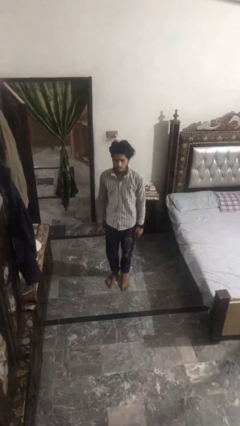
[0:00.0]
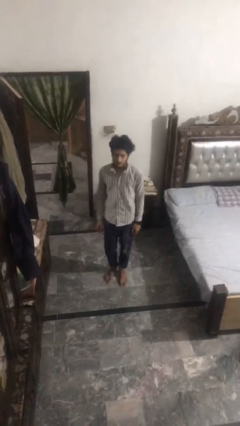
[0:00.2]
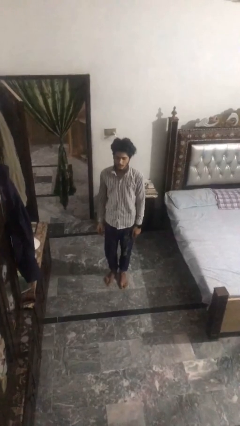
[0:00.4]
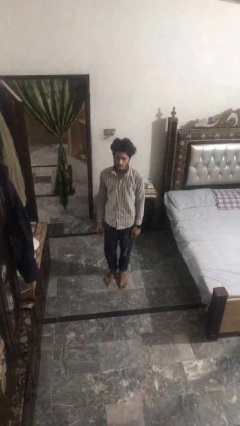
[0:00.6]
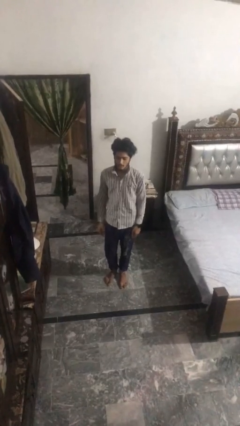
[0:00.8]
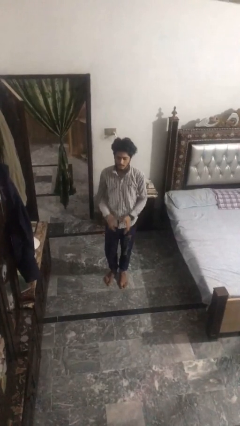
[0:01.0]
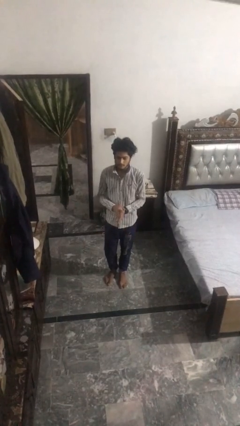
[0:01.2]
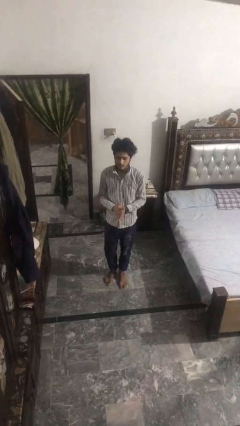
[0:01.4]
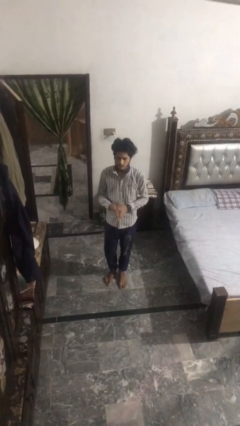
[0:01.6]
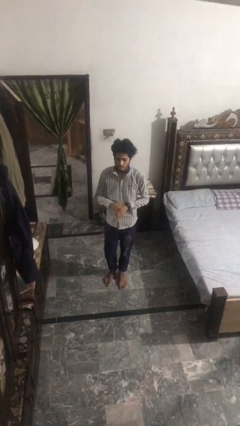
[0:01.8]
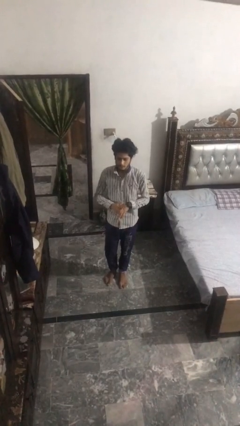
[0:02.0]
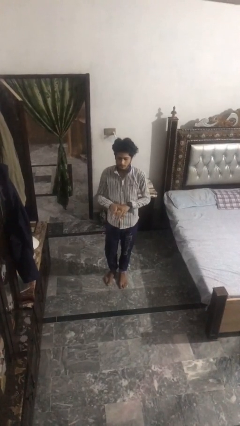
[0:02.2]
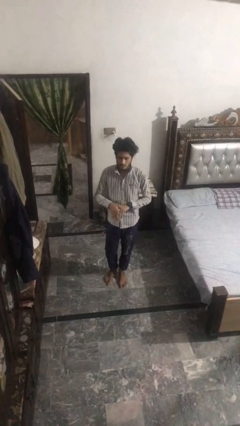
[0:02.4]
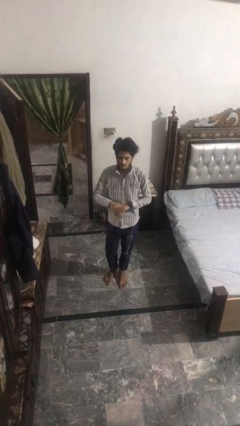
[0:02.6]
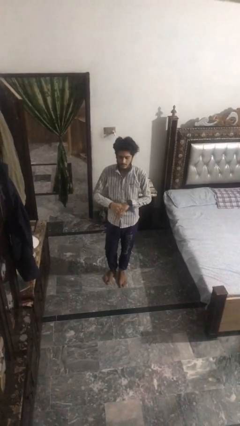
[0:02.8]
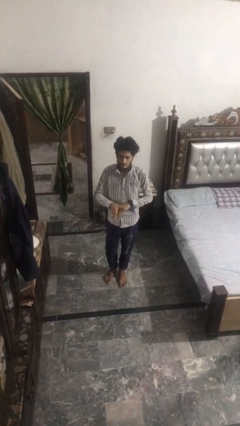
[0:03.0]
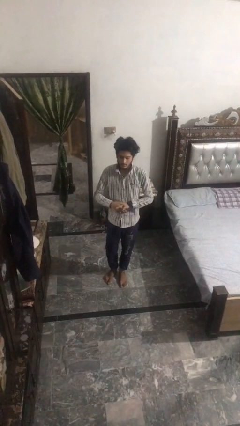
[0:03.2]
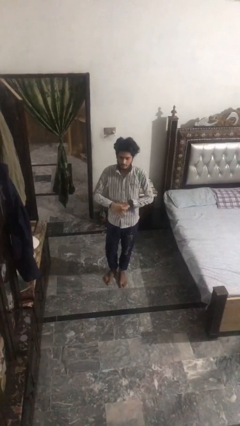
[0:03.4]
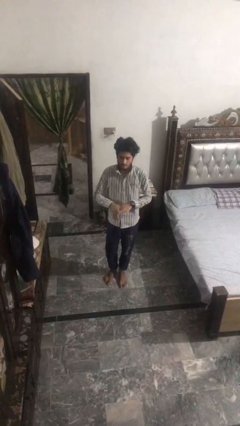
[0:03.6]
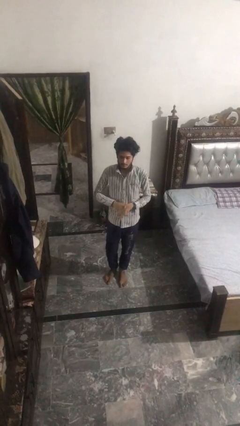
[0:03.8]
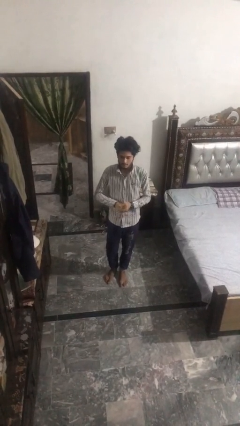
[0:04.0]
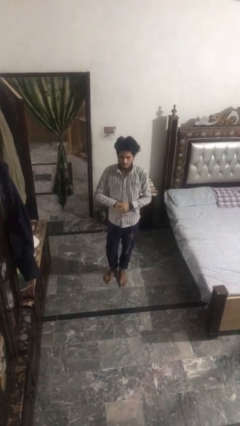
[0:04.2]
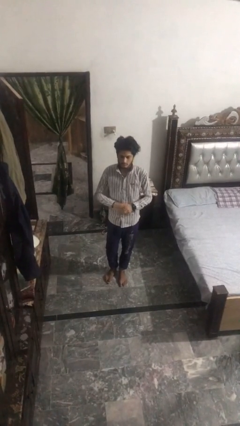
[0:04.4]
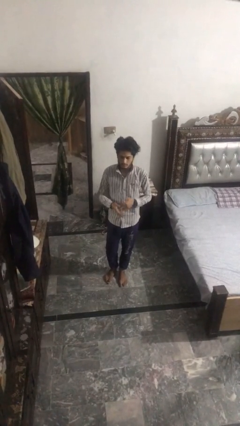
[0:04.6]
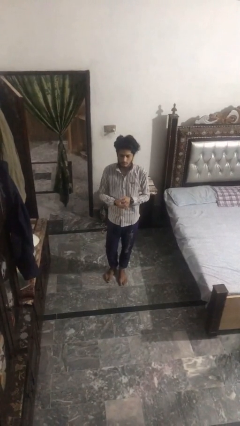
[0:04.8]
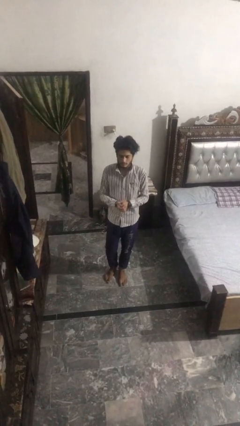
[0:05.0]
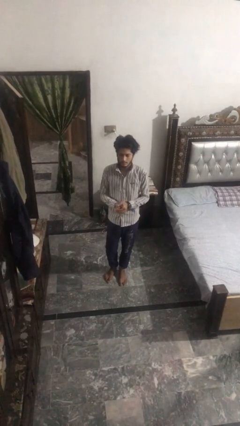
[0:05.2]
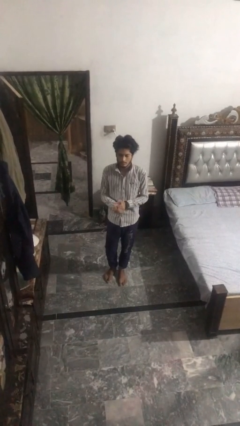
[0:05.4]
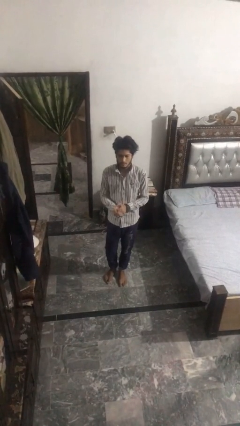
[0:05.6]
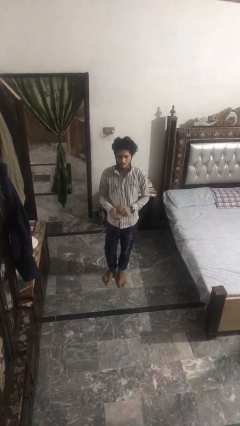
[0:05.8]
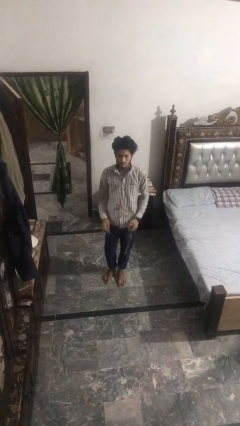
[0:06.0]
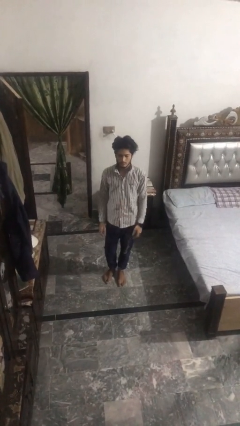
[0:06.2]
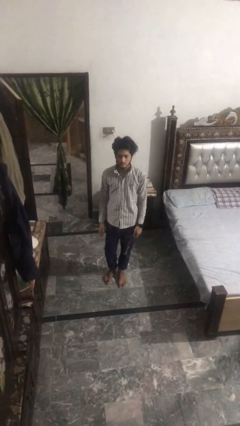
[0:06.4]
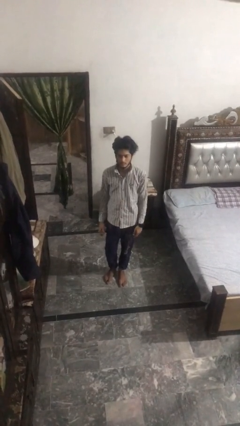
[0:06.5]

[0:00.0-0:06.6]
person cracks knuckles

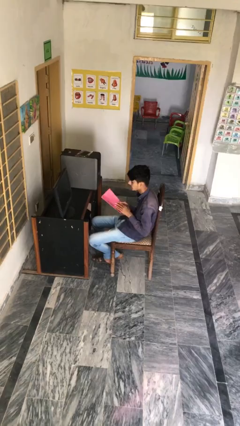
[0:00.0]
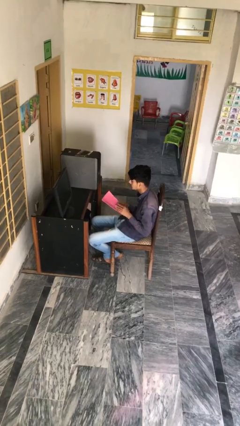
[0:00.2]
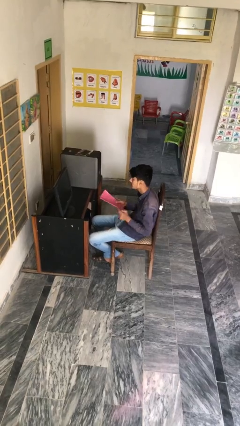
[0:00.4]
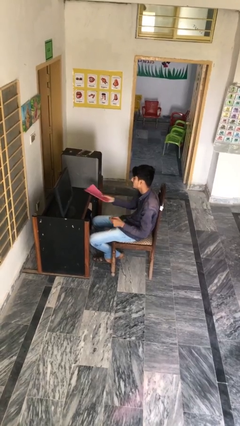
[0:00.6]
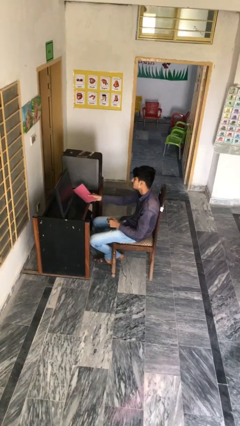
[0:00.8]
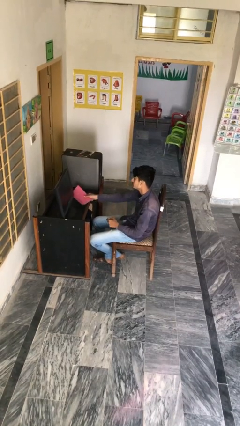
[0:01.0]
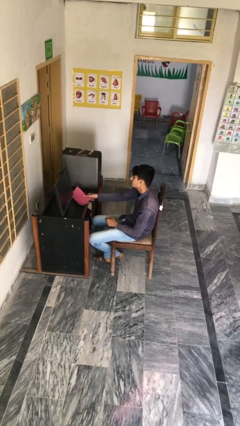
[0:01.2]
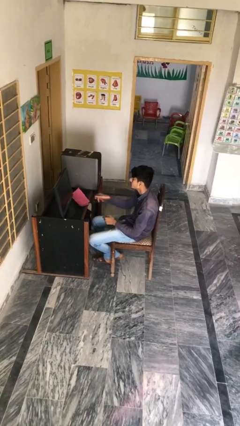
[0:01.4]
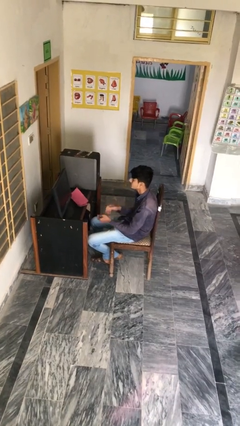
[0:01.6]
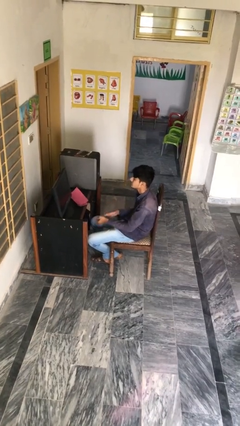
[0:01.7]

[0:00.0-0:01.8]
person puts down object on table

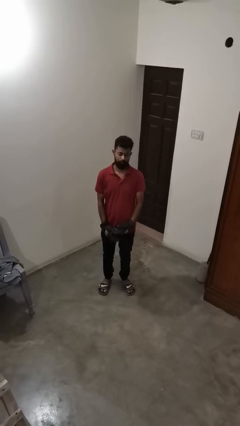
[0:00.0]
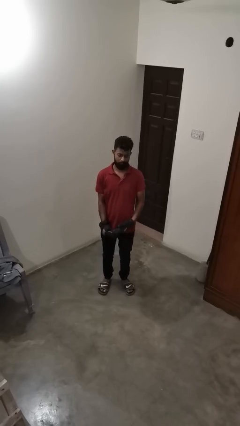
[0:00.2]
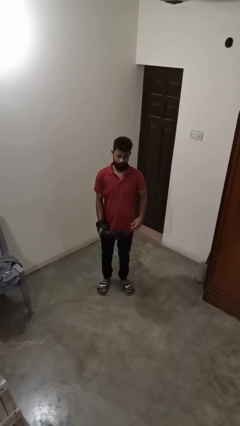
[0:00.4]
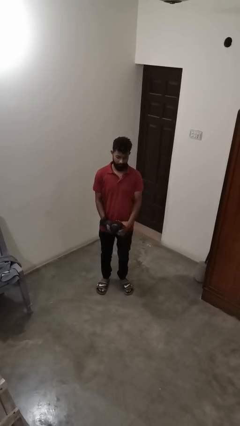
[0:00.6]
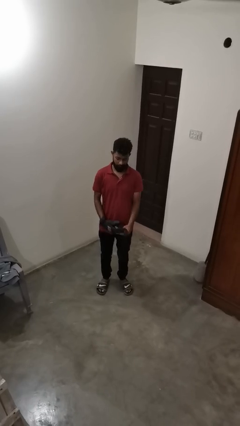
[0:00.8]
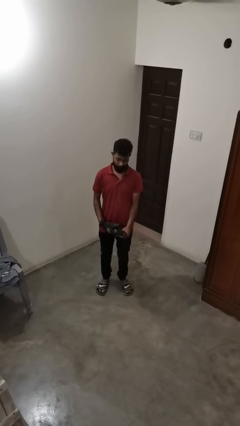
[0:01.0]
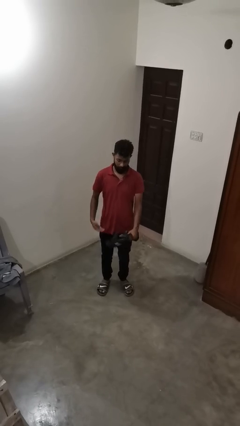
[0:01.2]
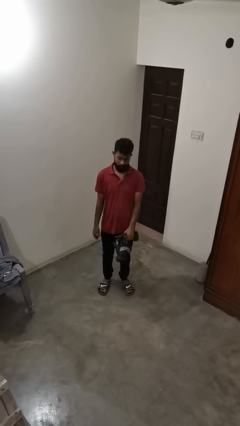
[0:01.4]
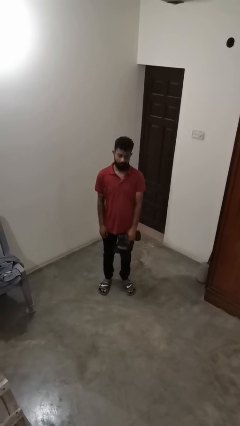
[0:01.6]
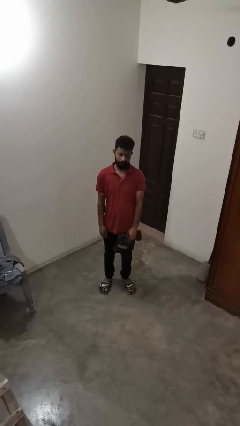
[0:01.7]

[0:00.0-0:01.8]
person takes off gloves

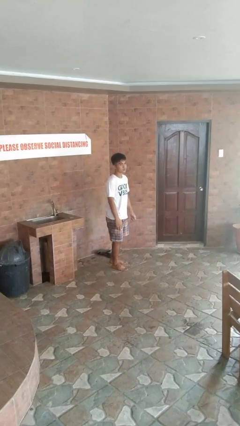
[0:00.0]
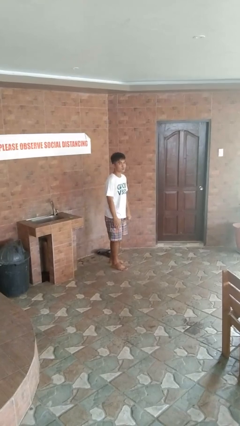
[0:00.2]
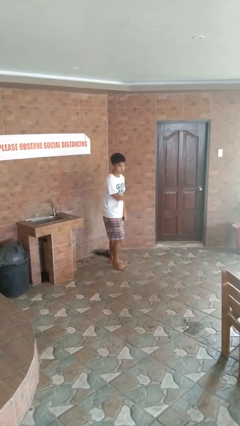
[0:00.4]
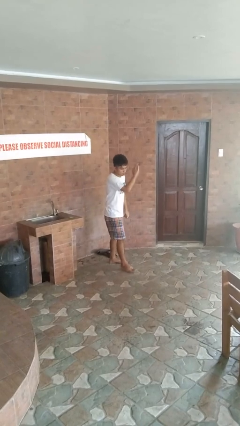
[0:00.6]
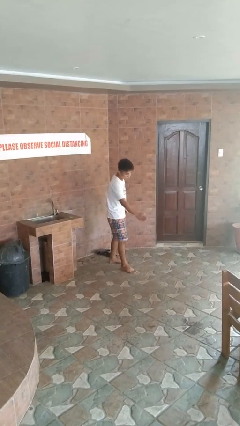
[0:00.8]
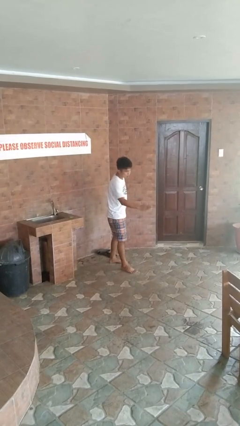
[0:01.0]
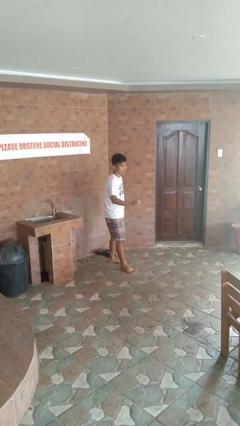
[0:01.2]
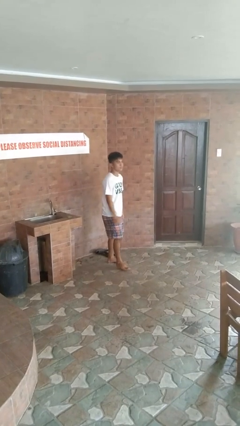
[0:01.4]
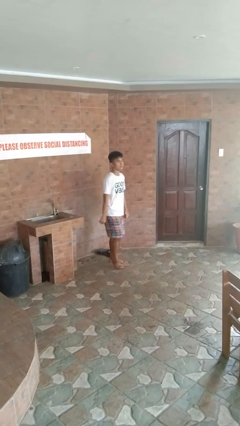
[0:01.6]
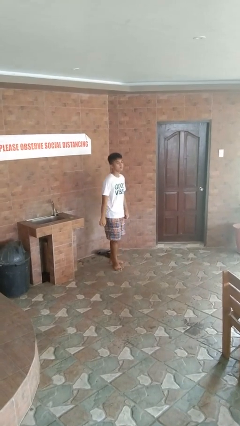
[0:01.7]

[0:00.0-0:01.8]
person karate chop

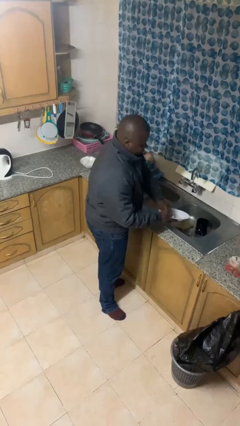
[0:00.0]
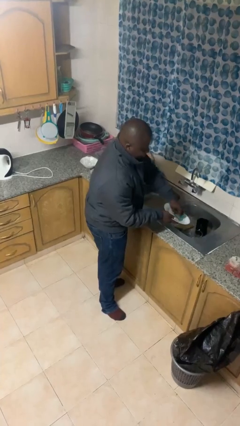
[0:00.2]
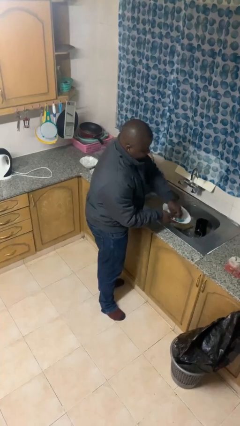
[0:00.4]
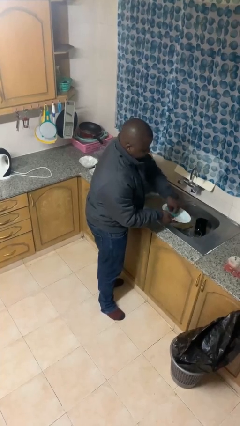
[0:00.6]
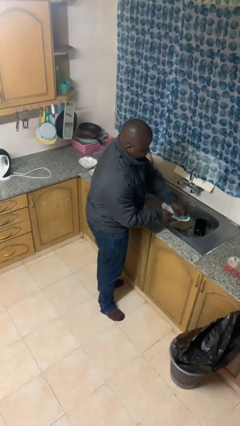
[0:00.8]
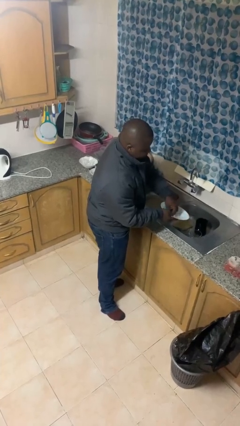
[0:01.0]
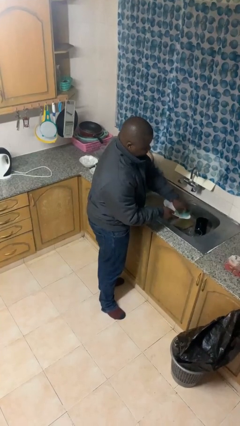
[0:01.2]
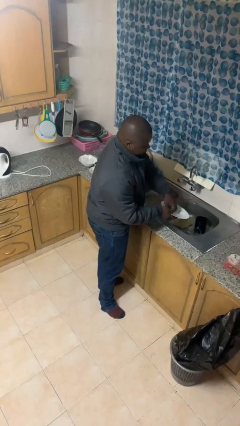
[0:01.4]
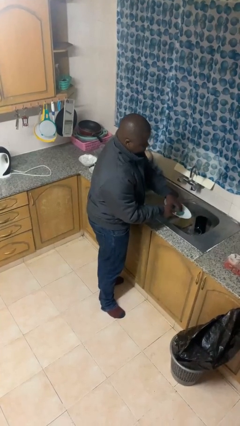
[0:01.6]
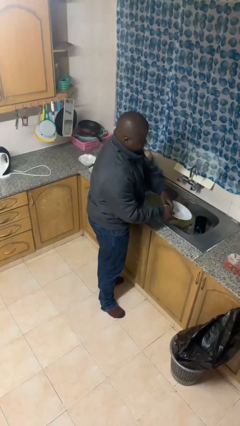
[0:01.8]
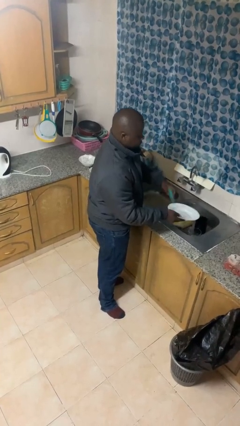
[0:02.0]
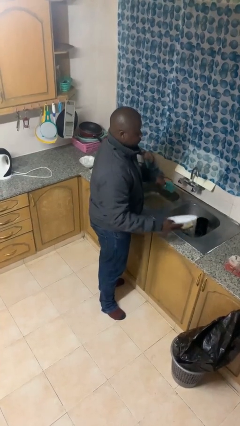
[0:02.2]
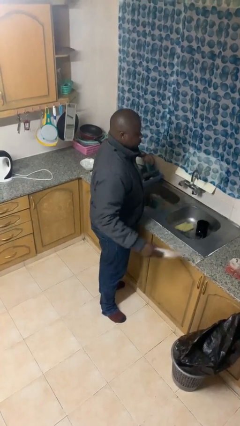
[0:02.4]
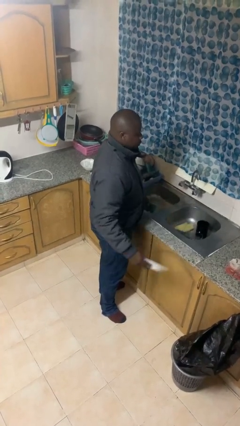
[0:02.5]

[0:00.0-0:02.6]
person washes dish

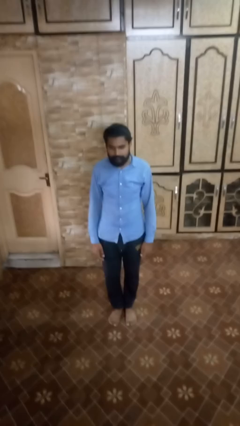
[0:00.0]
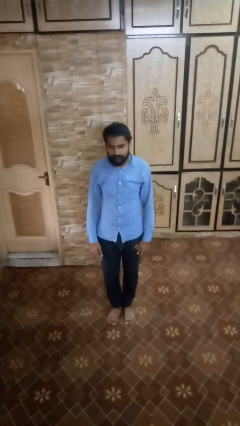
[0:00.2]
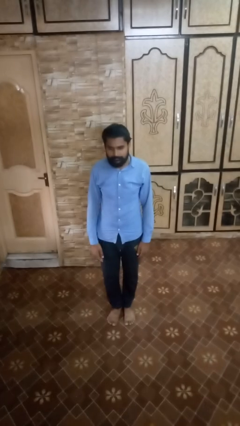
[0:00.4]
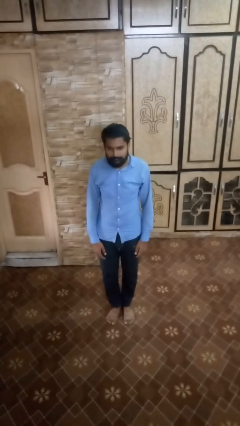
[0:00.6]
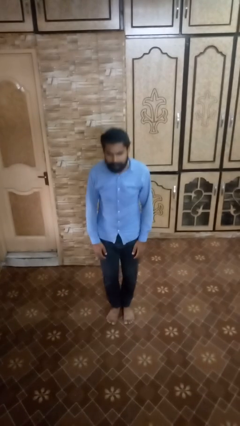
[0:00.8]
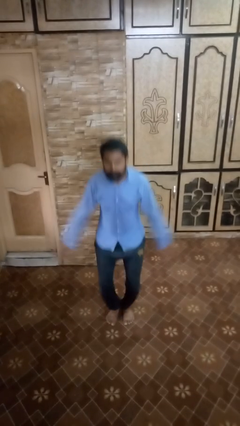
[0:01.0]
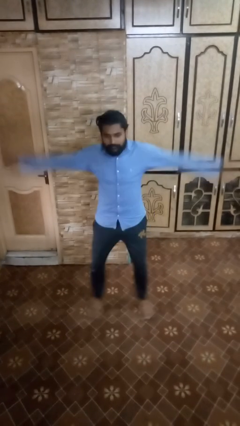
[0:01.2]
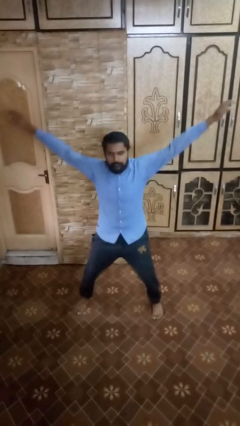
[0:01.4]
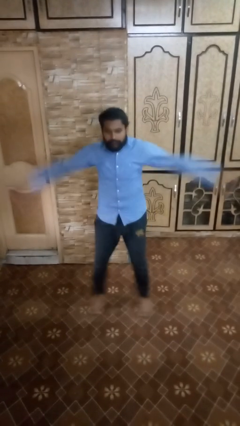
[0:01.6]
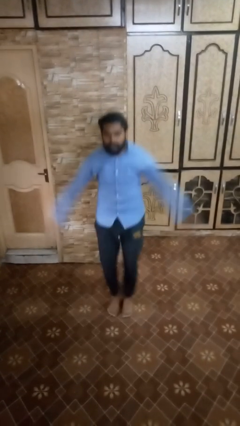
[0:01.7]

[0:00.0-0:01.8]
person exercises with jumping jacks

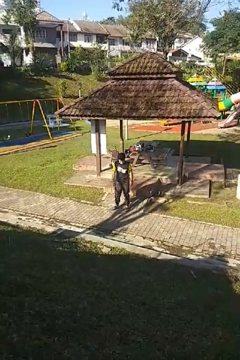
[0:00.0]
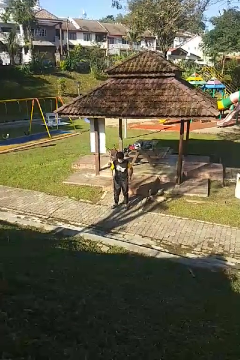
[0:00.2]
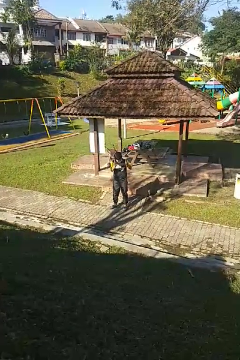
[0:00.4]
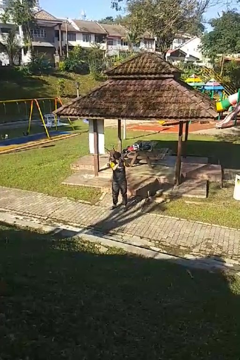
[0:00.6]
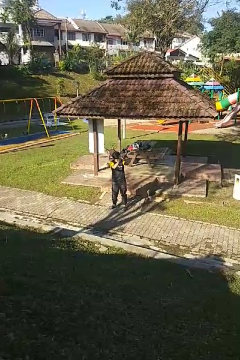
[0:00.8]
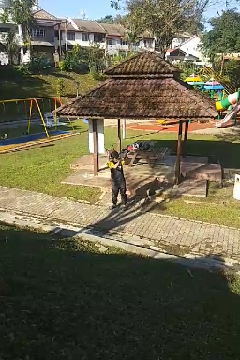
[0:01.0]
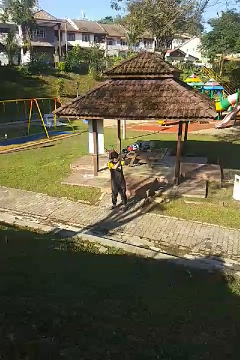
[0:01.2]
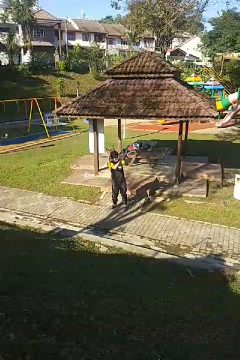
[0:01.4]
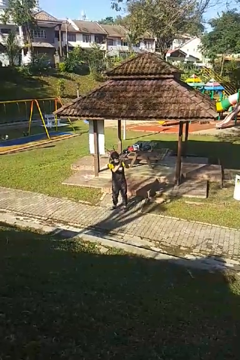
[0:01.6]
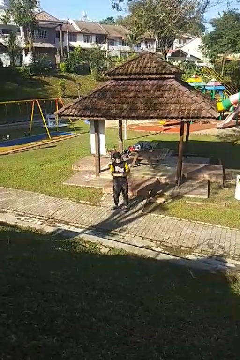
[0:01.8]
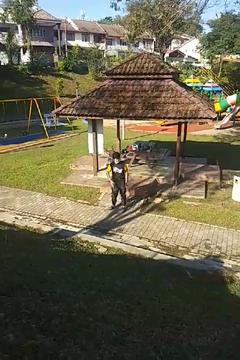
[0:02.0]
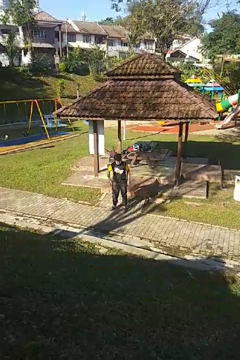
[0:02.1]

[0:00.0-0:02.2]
person claps hands
